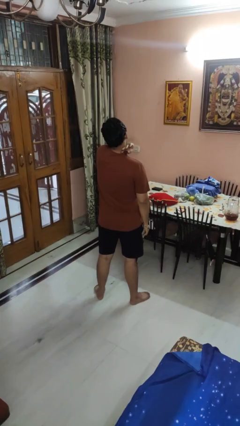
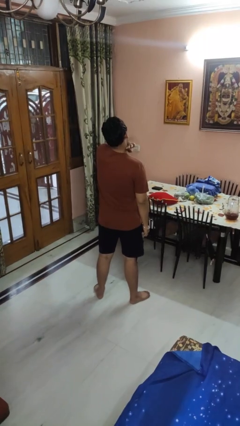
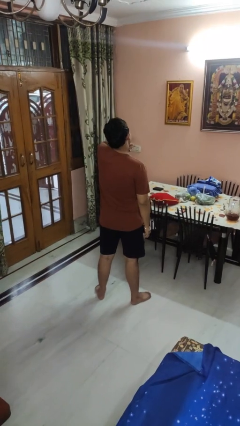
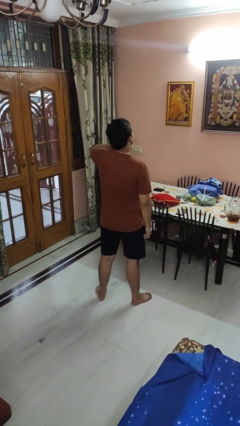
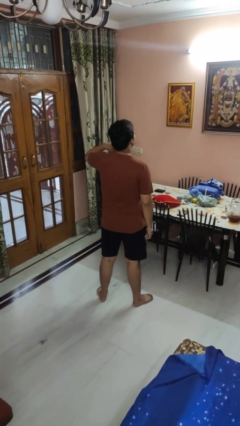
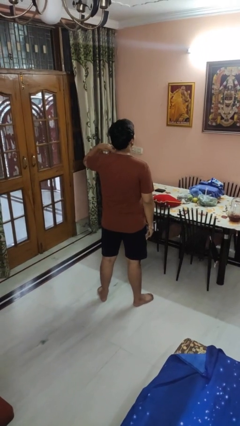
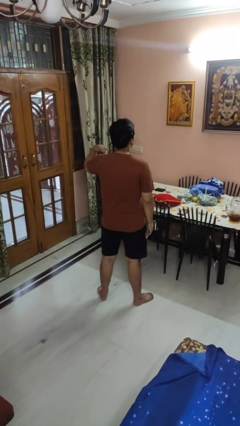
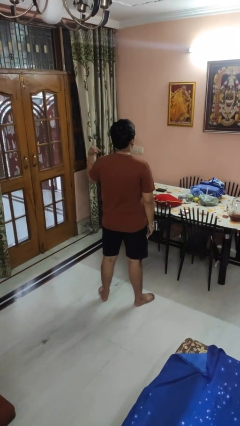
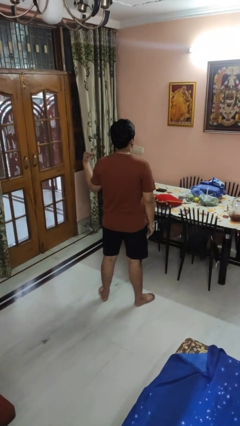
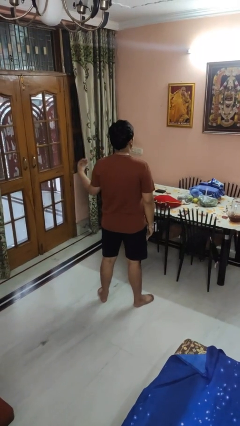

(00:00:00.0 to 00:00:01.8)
person gestures cut

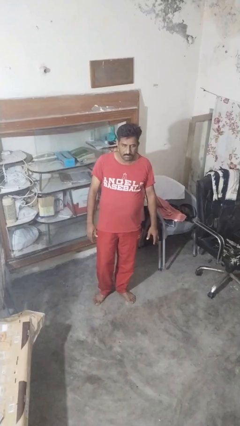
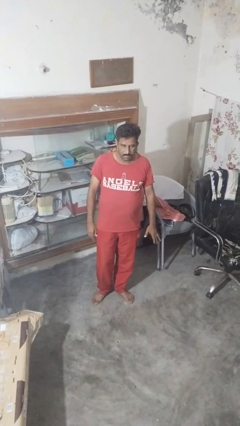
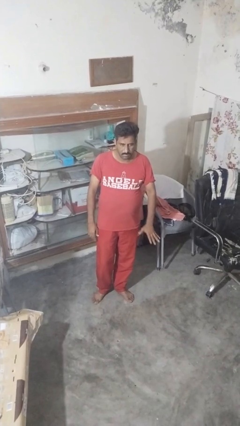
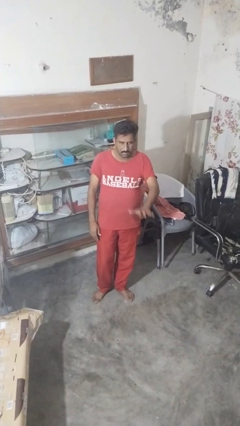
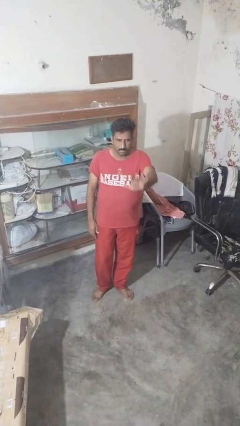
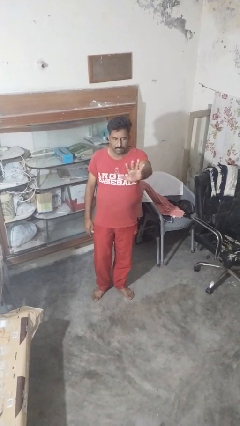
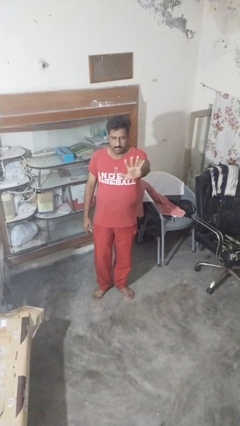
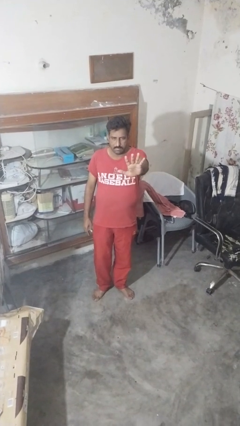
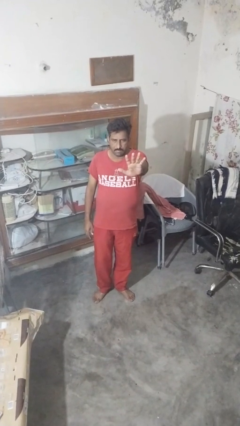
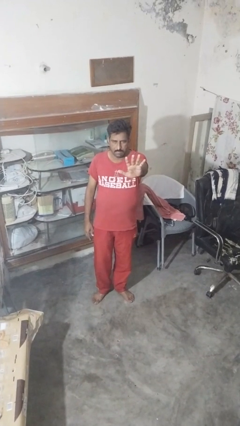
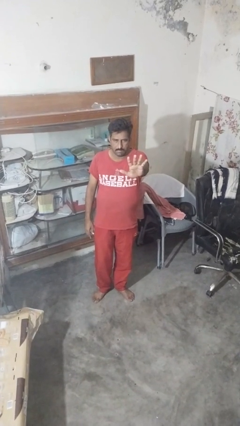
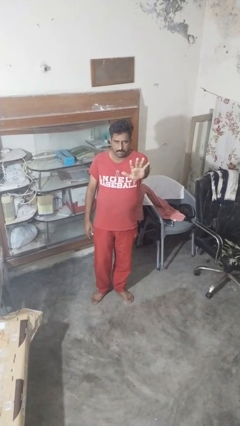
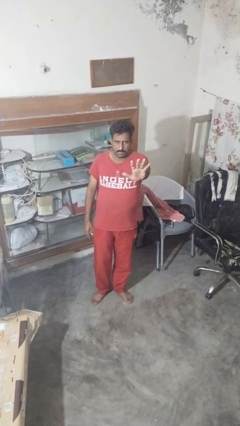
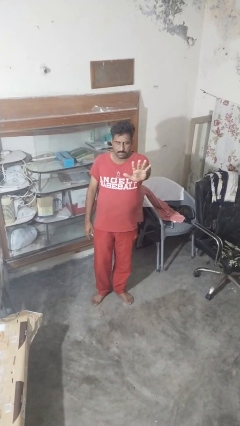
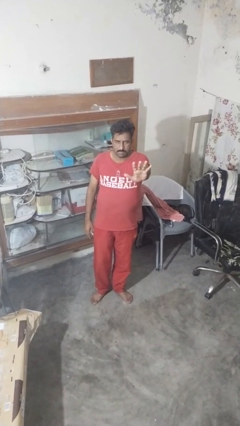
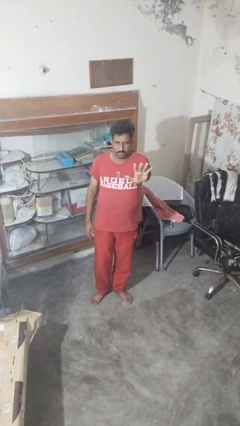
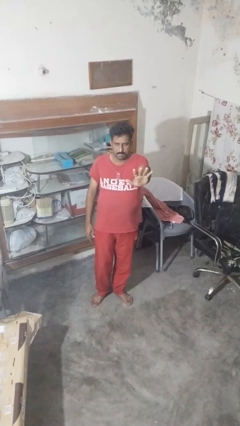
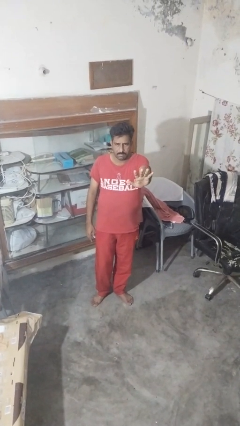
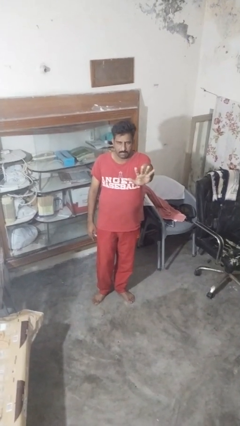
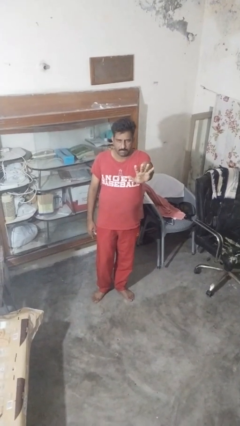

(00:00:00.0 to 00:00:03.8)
person gestures number five

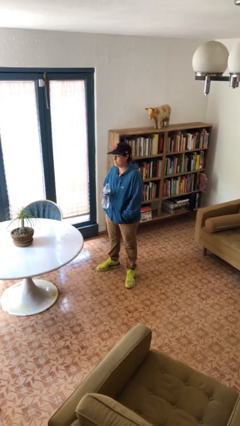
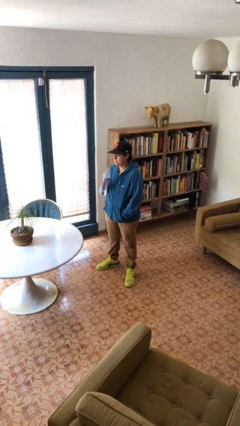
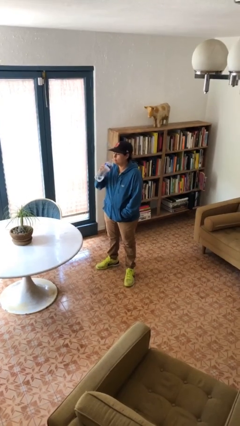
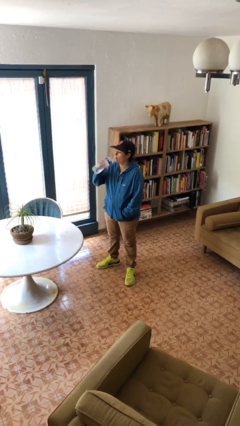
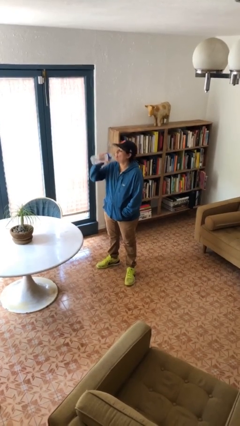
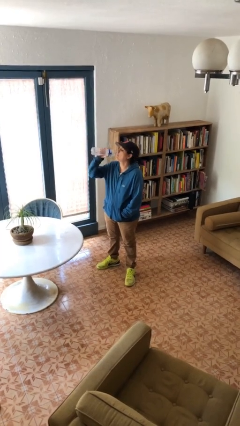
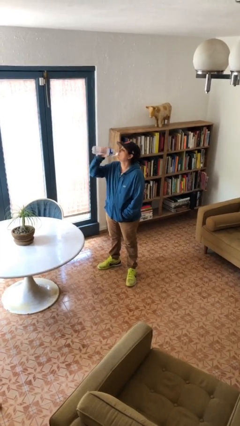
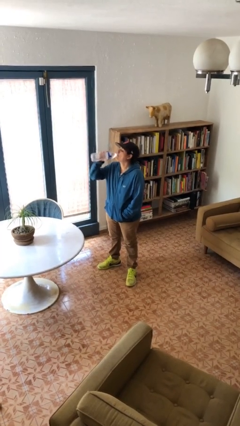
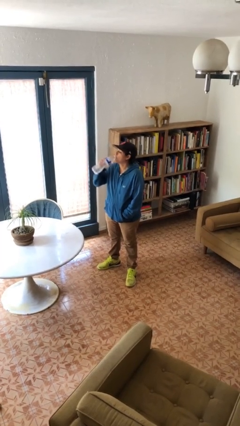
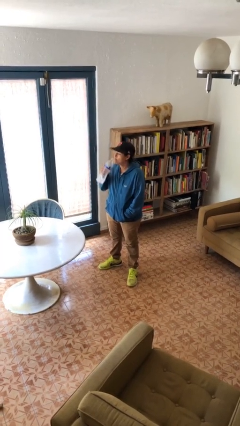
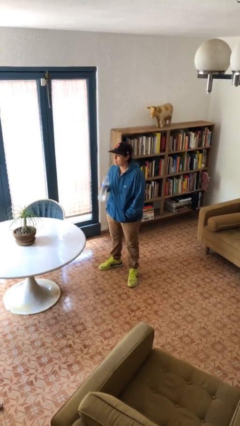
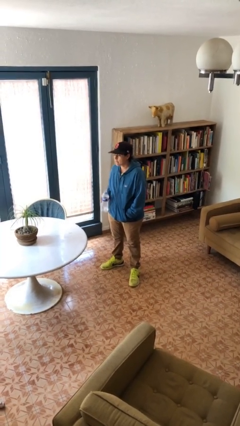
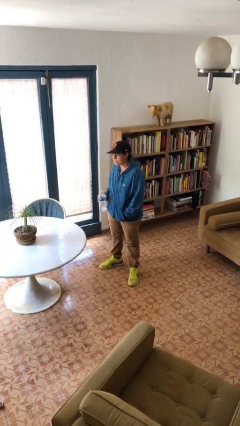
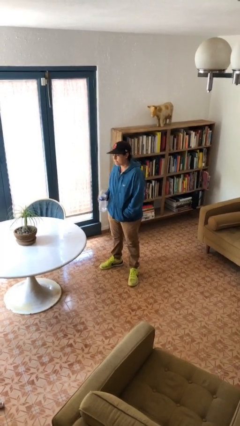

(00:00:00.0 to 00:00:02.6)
person drinks from bottle

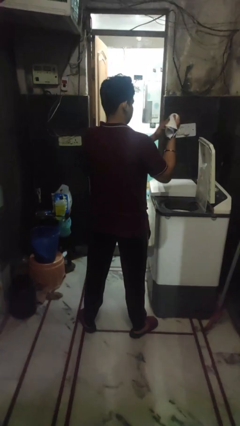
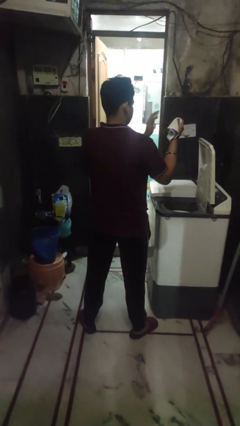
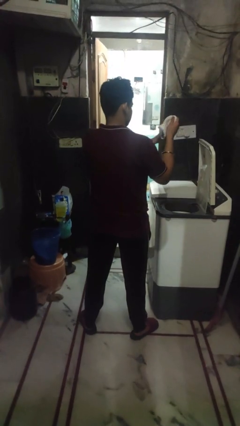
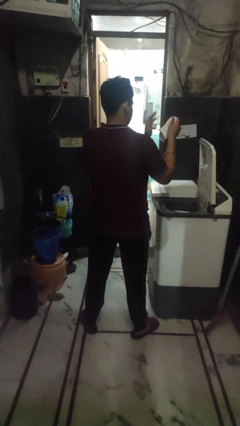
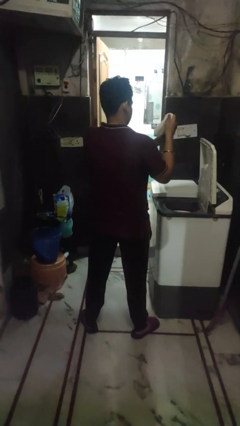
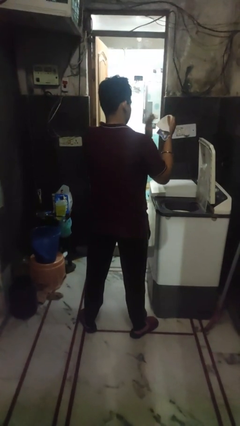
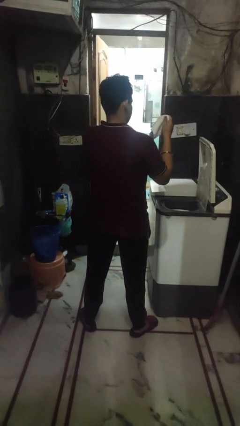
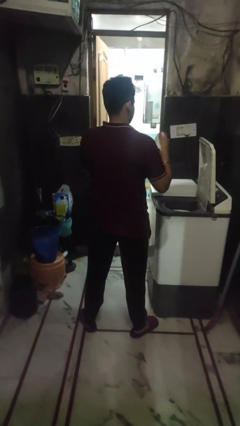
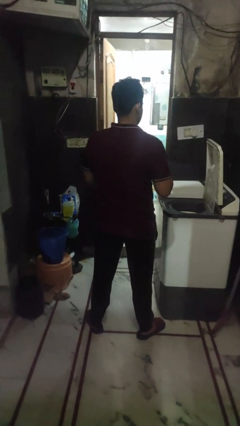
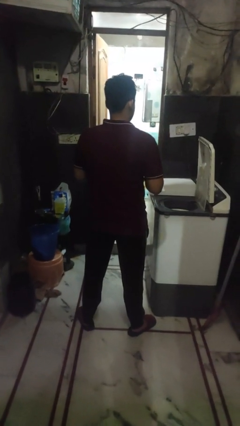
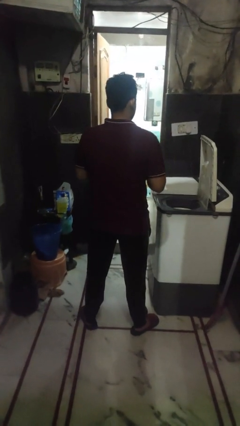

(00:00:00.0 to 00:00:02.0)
person cleans dryer lint trap

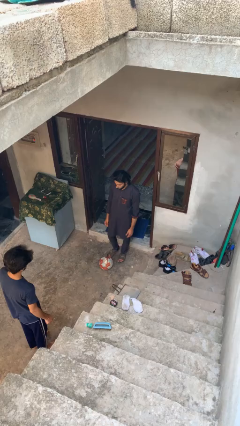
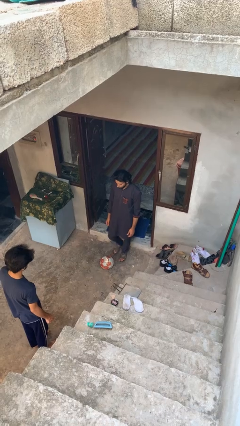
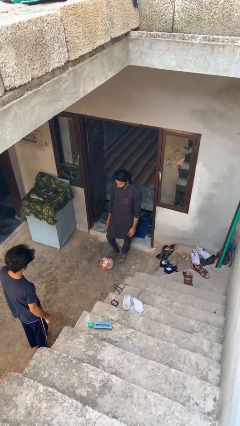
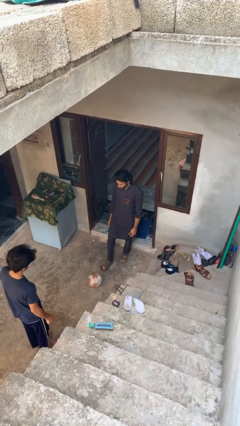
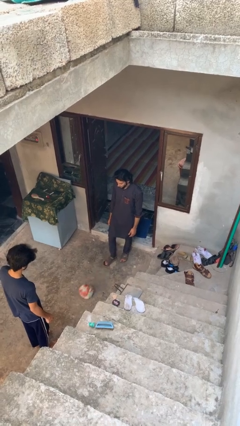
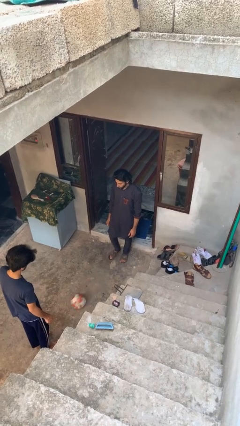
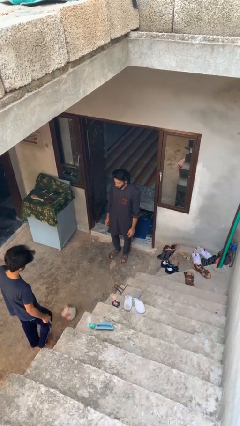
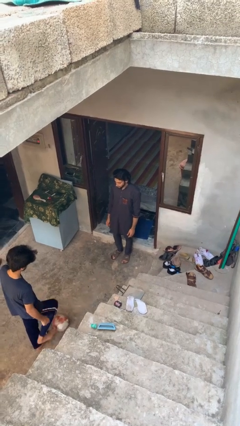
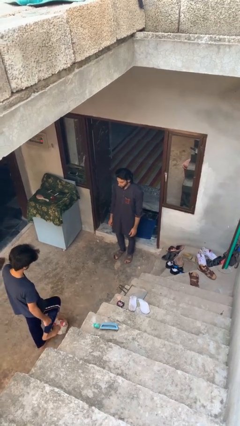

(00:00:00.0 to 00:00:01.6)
person kicks object to person

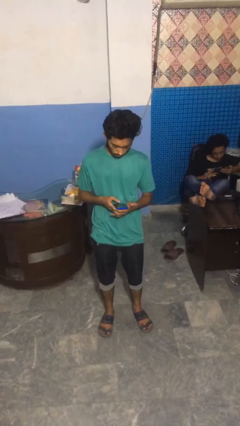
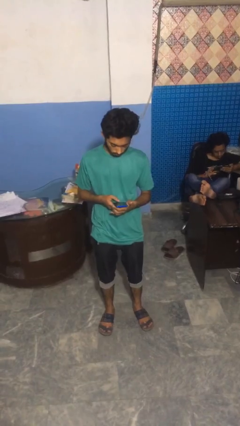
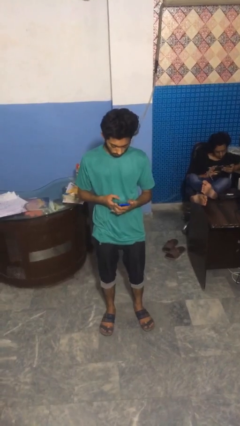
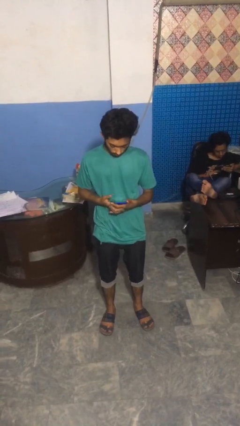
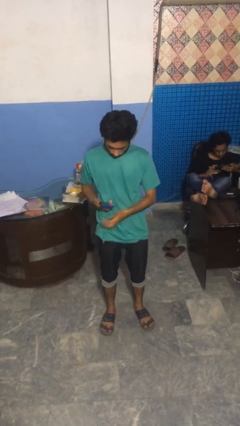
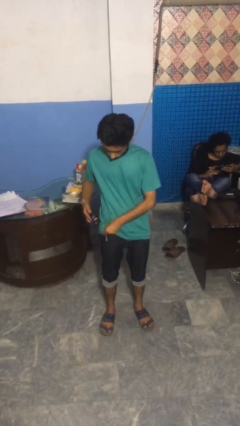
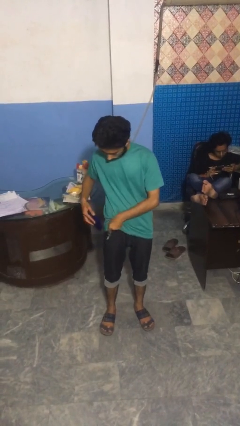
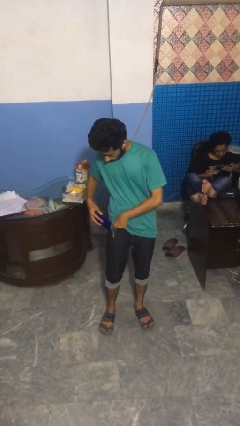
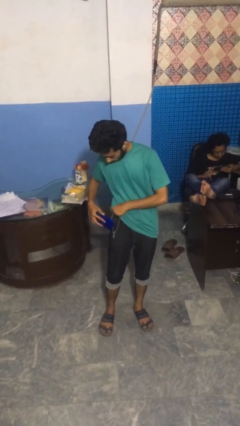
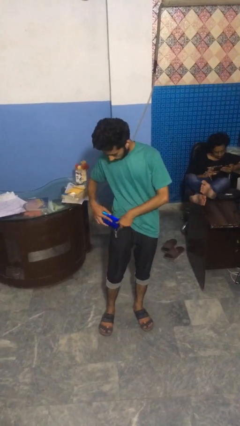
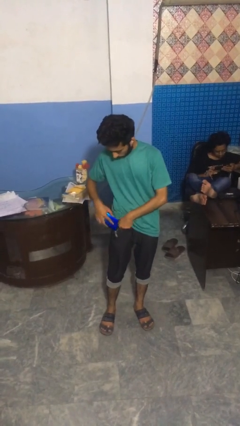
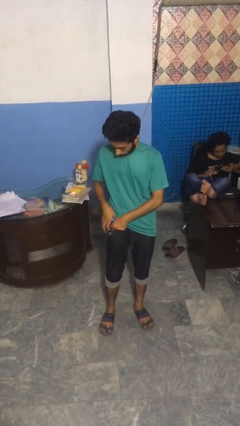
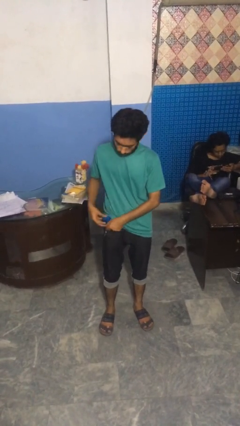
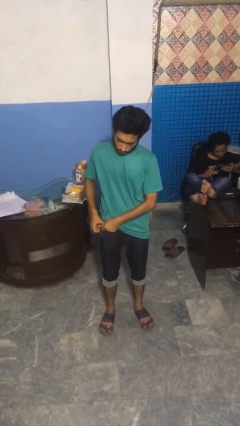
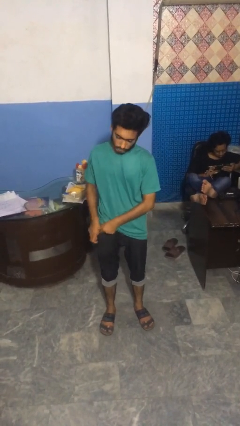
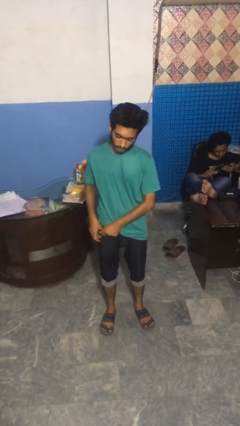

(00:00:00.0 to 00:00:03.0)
person puts phone into pocket

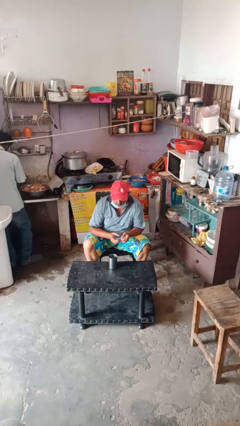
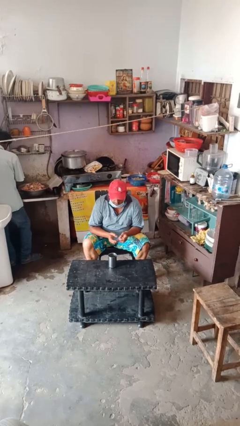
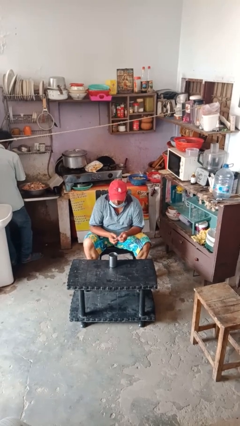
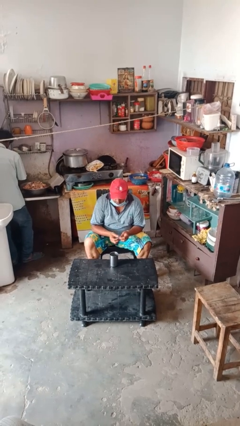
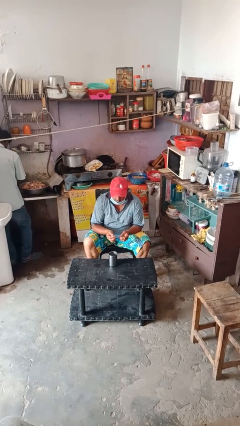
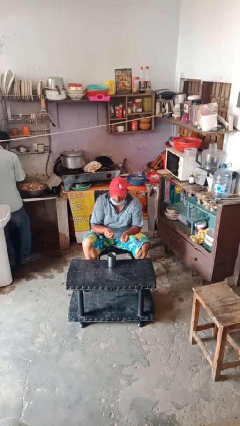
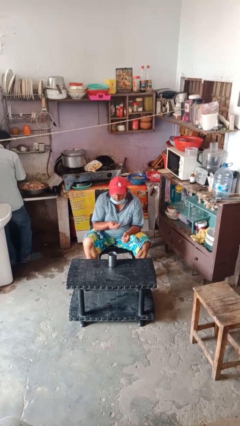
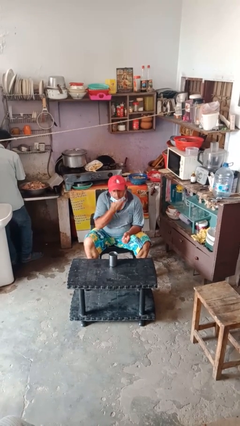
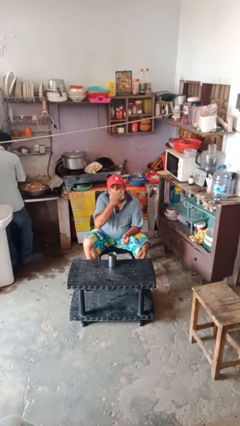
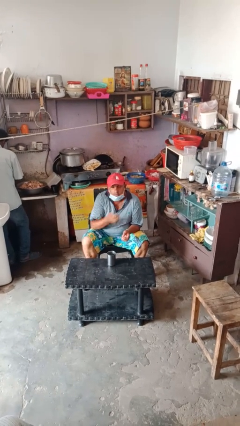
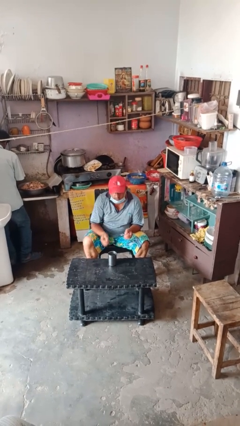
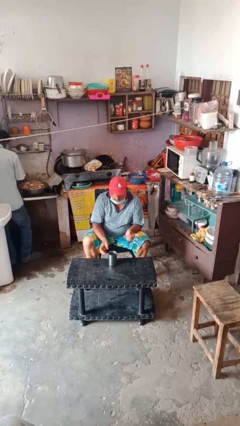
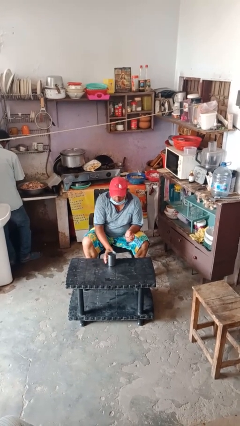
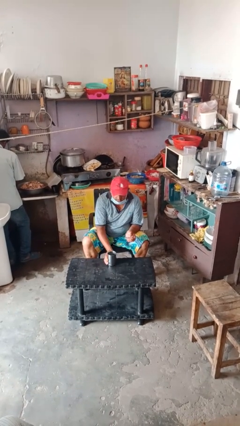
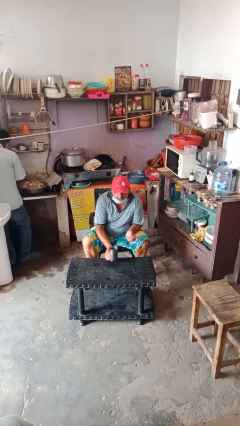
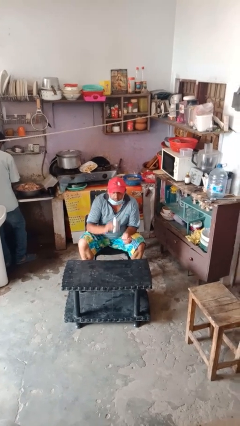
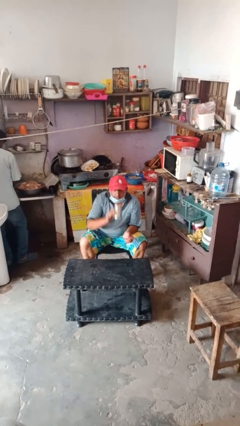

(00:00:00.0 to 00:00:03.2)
person takes medicine pills
